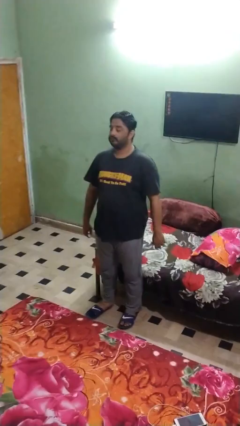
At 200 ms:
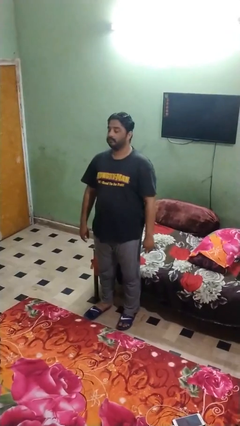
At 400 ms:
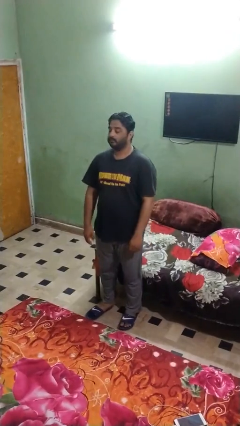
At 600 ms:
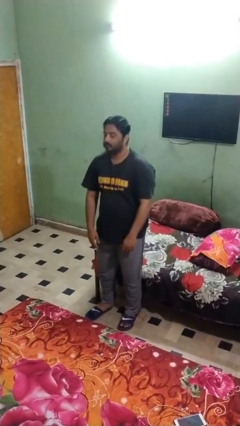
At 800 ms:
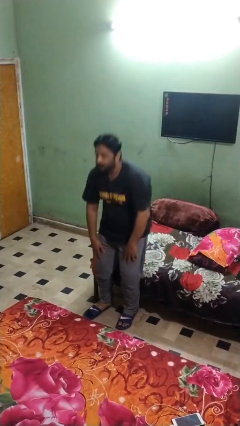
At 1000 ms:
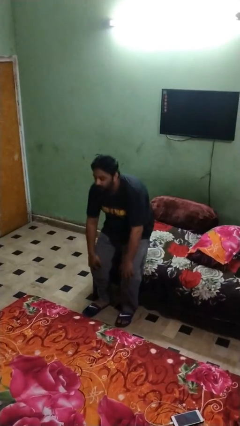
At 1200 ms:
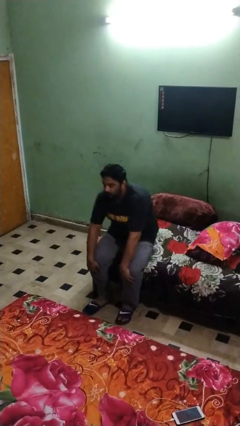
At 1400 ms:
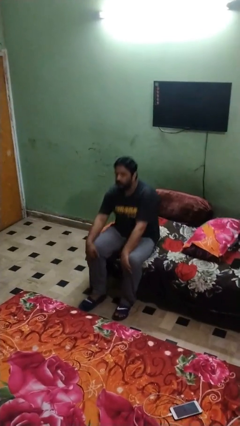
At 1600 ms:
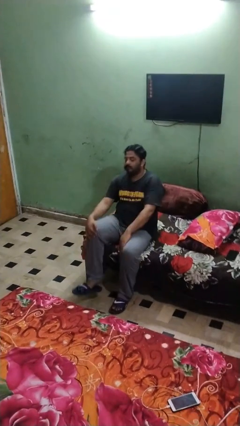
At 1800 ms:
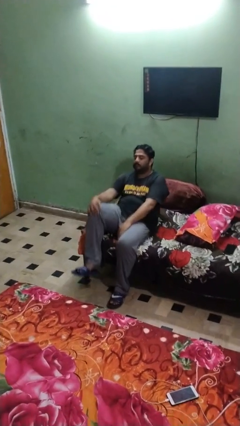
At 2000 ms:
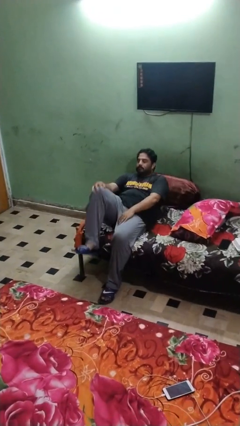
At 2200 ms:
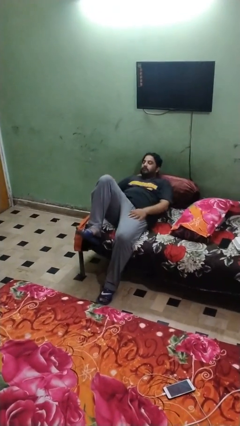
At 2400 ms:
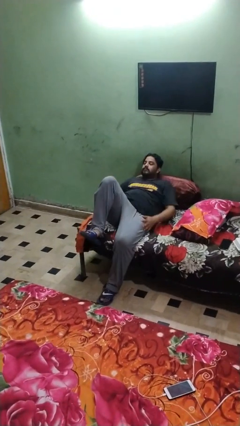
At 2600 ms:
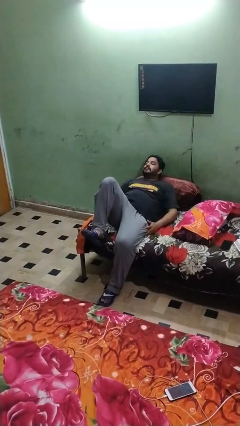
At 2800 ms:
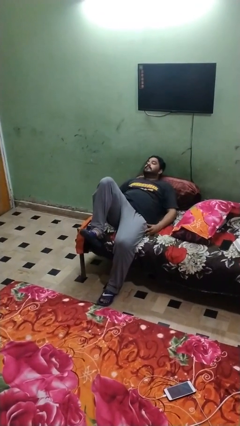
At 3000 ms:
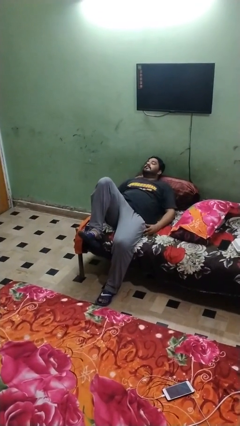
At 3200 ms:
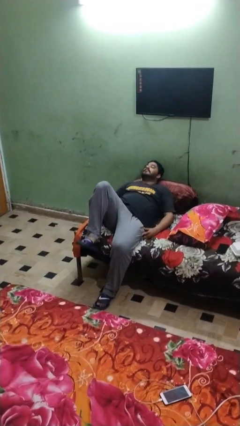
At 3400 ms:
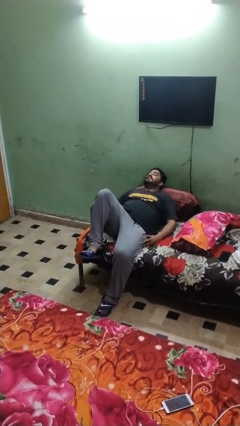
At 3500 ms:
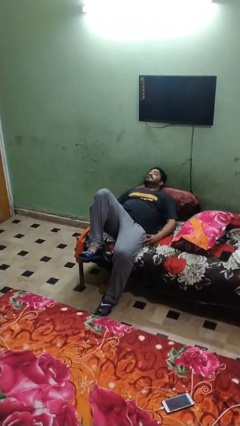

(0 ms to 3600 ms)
person lies down on couch

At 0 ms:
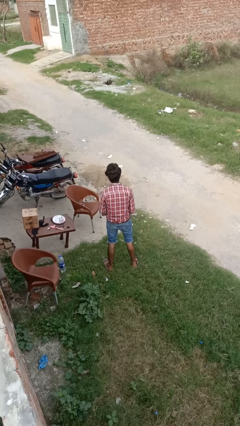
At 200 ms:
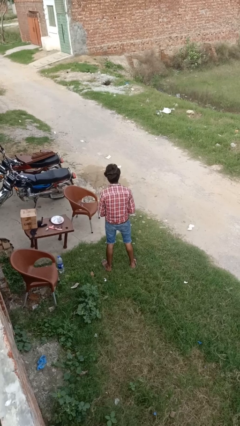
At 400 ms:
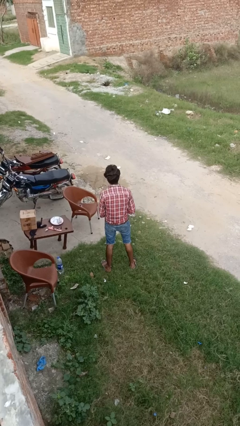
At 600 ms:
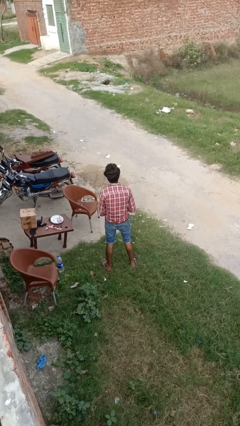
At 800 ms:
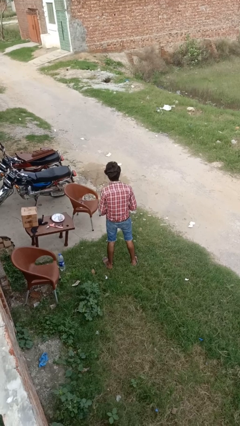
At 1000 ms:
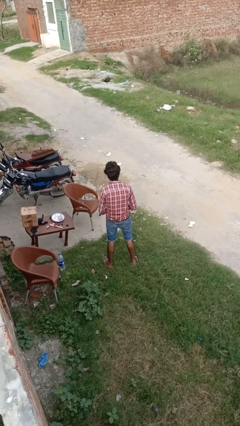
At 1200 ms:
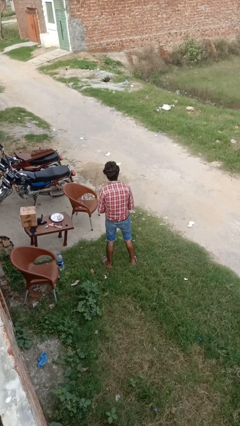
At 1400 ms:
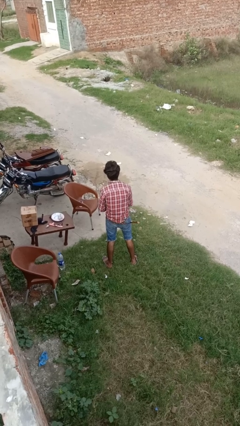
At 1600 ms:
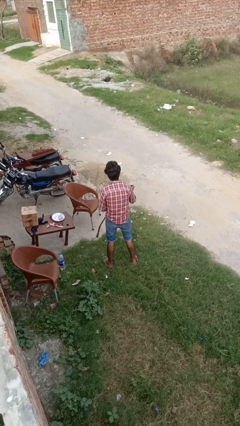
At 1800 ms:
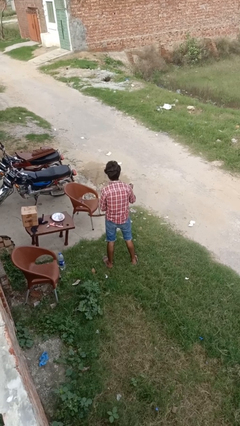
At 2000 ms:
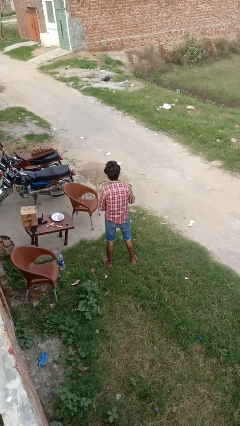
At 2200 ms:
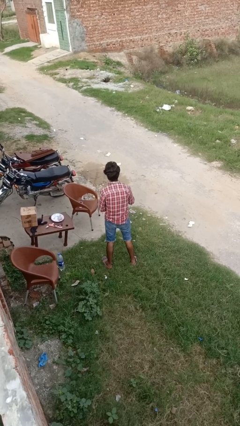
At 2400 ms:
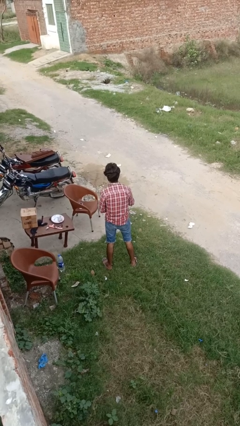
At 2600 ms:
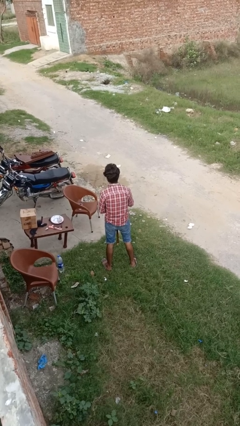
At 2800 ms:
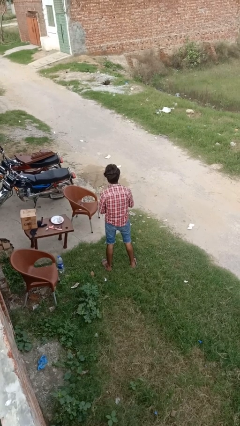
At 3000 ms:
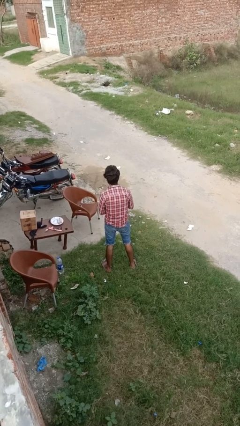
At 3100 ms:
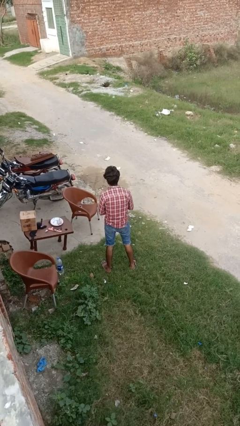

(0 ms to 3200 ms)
person takes off belt

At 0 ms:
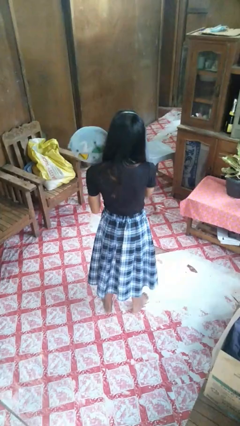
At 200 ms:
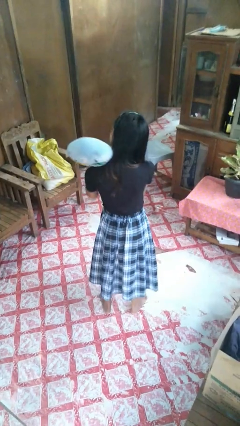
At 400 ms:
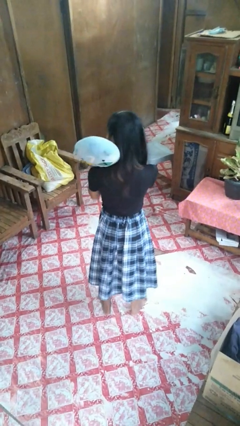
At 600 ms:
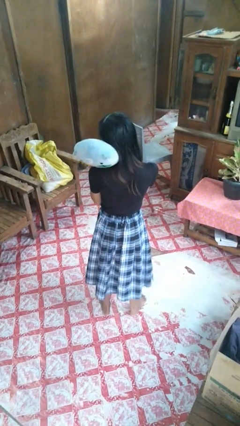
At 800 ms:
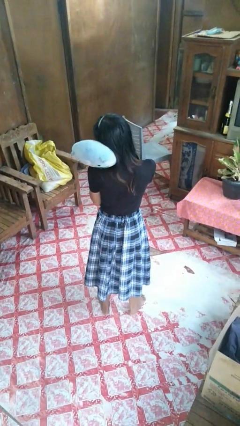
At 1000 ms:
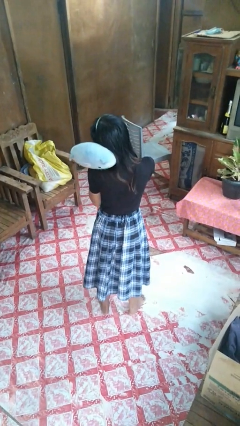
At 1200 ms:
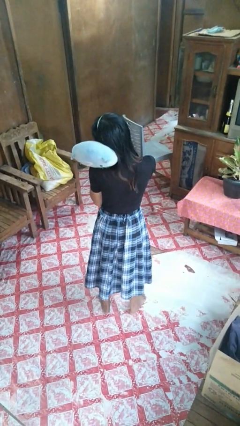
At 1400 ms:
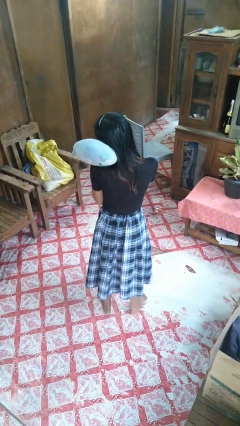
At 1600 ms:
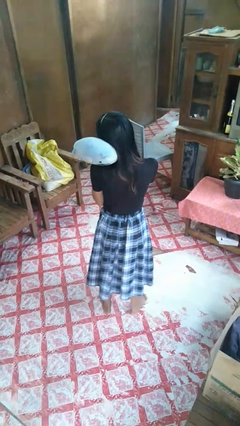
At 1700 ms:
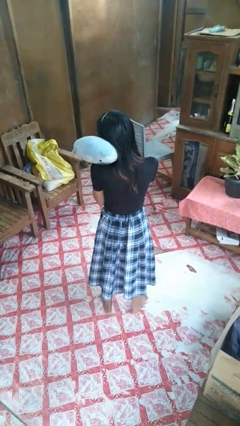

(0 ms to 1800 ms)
person hugs stuffed animal

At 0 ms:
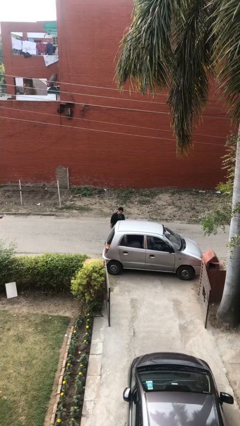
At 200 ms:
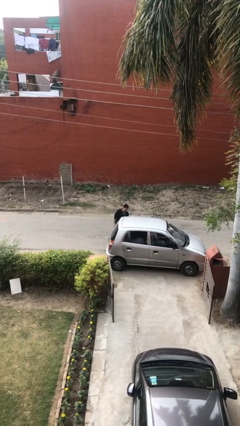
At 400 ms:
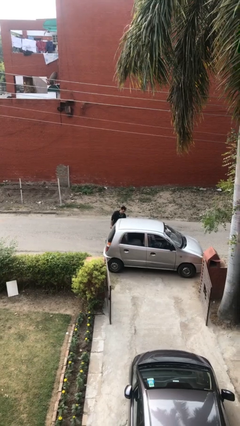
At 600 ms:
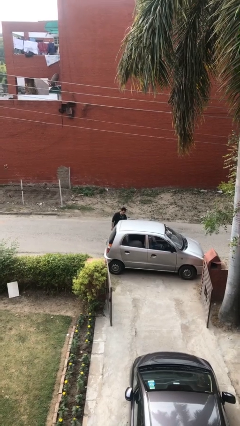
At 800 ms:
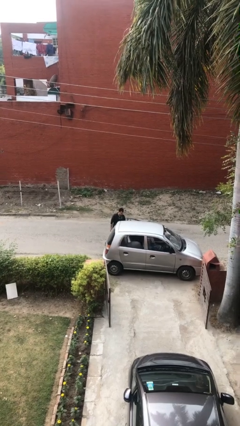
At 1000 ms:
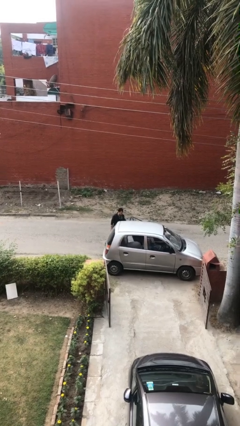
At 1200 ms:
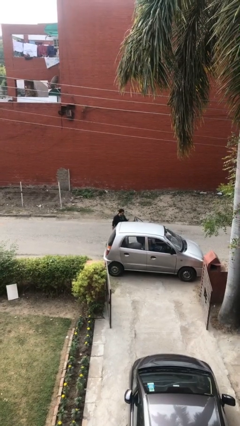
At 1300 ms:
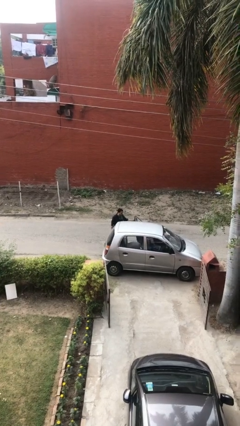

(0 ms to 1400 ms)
person opens car door

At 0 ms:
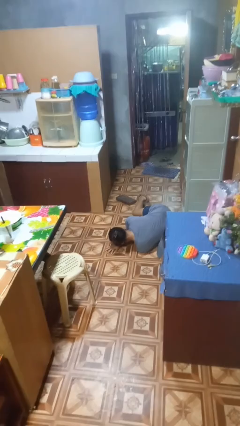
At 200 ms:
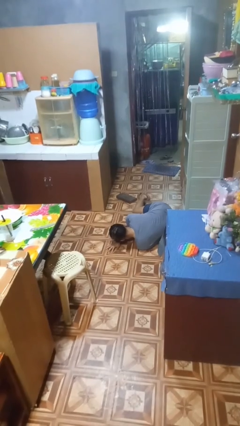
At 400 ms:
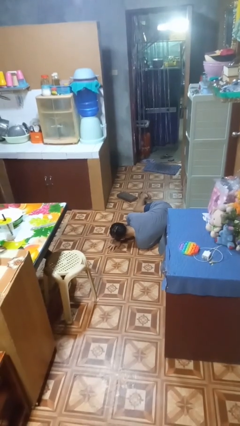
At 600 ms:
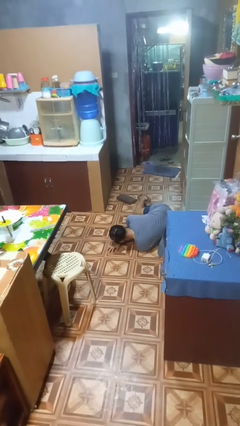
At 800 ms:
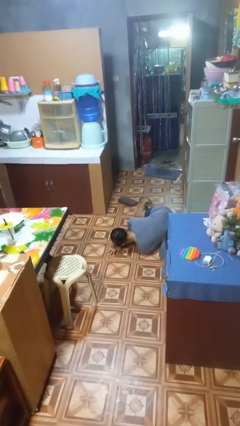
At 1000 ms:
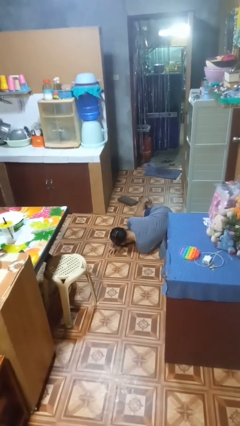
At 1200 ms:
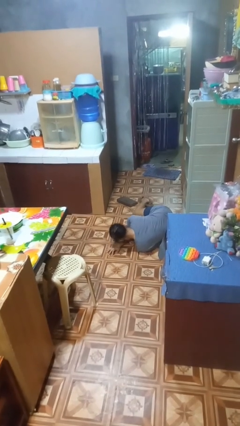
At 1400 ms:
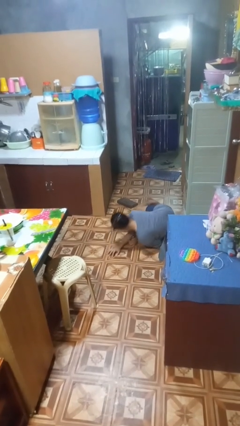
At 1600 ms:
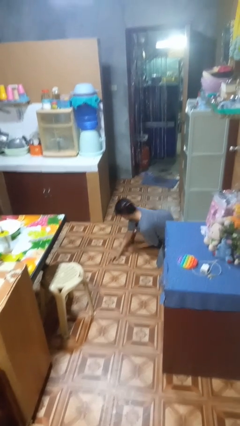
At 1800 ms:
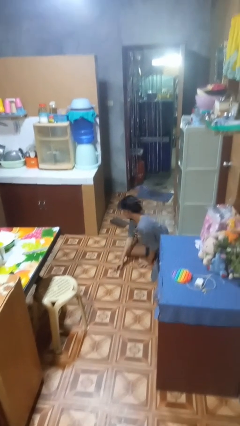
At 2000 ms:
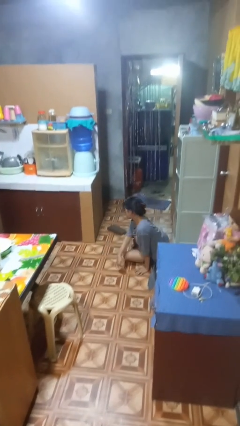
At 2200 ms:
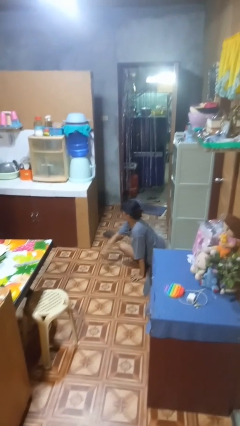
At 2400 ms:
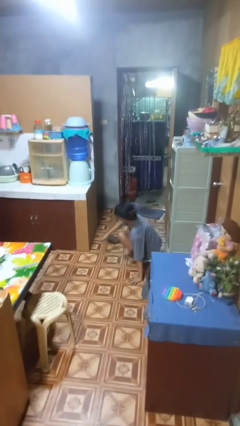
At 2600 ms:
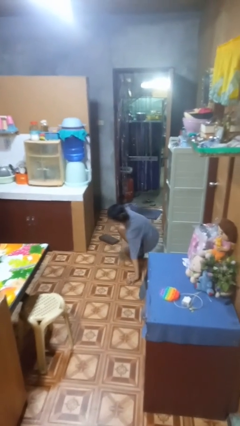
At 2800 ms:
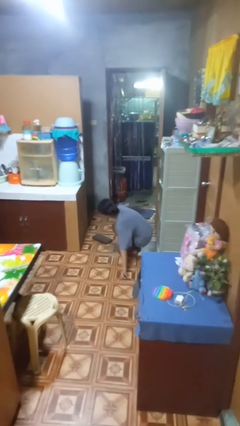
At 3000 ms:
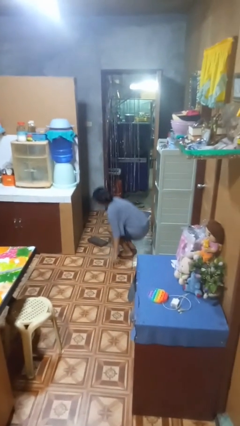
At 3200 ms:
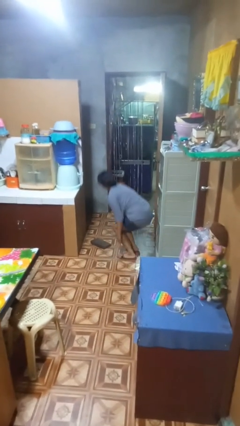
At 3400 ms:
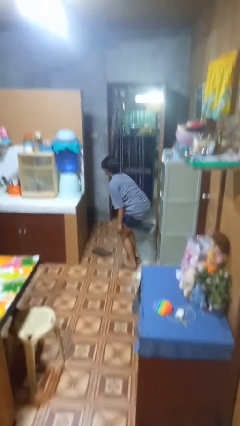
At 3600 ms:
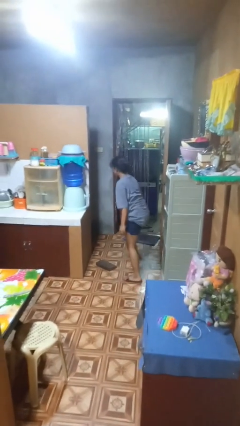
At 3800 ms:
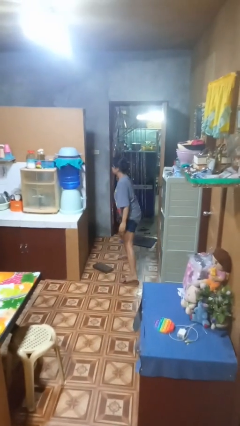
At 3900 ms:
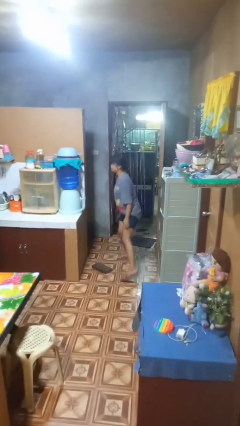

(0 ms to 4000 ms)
person lies down on floor

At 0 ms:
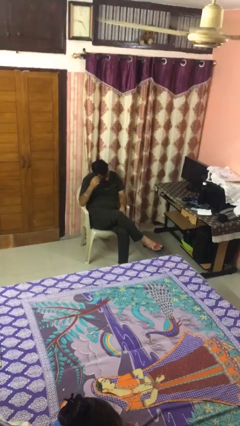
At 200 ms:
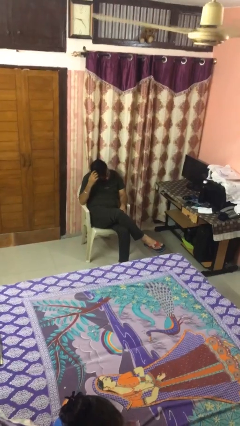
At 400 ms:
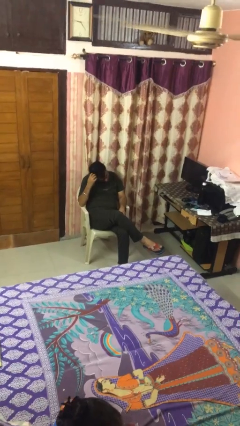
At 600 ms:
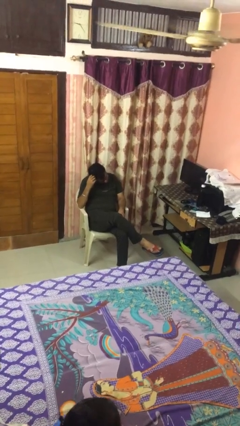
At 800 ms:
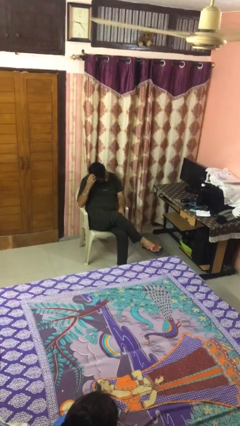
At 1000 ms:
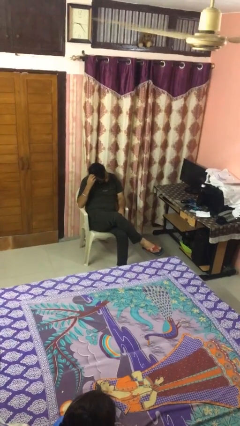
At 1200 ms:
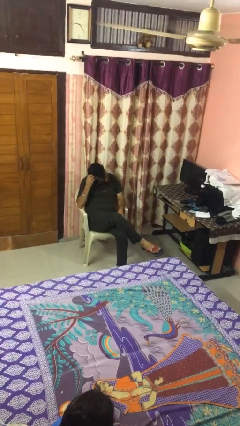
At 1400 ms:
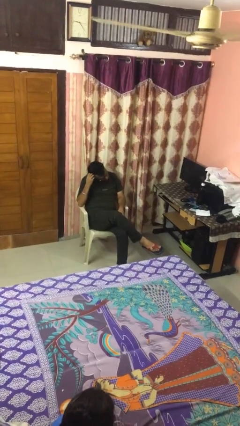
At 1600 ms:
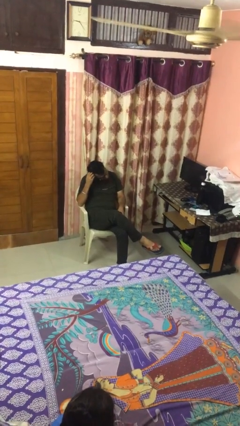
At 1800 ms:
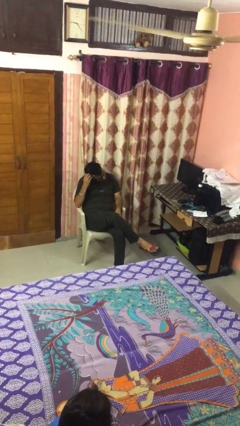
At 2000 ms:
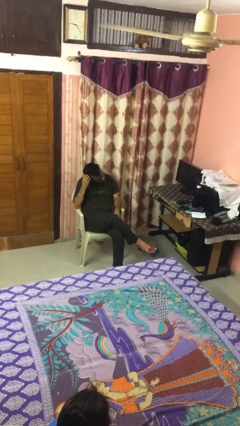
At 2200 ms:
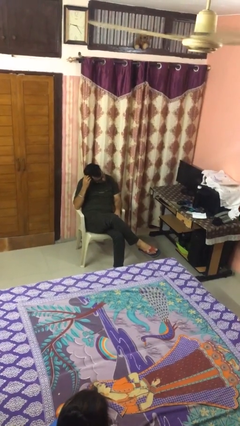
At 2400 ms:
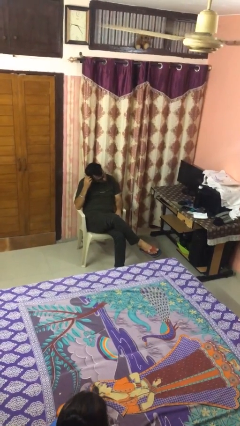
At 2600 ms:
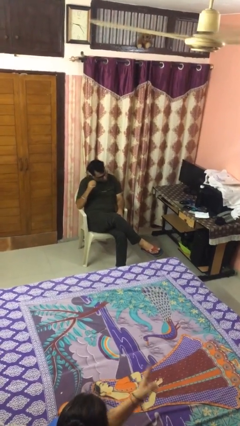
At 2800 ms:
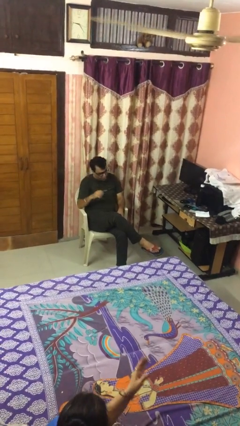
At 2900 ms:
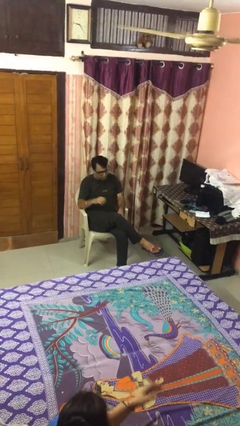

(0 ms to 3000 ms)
person scratches face

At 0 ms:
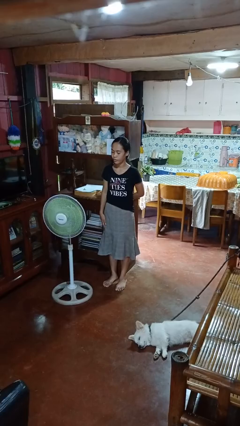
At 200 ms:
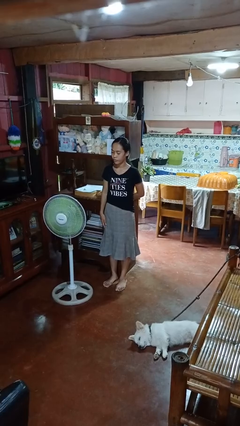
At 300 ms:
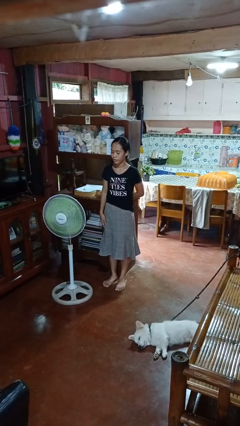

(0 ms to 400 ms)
person turns off fan
